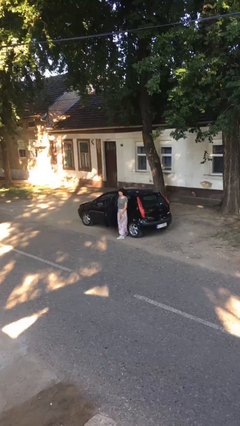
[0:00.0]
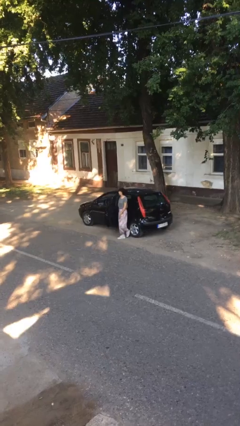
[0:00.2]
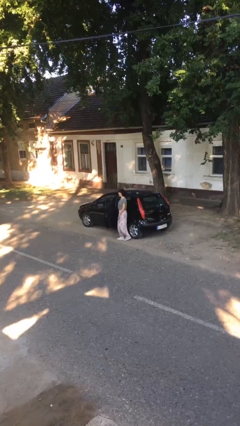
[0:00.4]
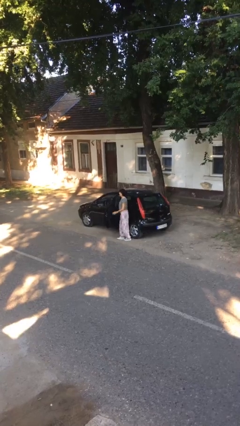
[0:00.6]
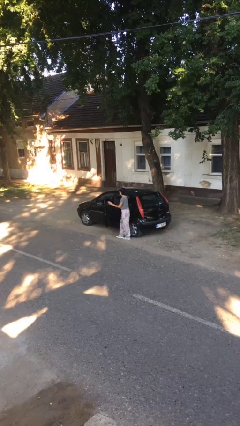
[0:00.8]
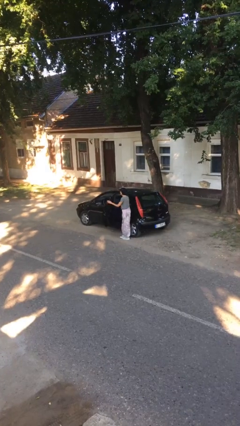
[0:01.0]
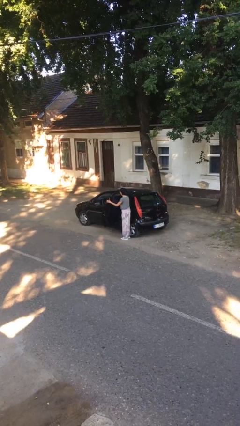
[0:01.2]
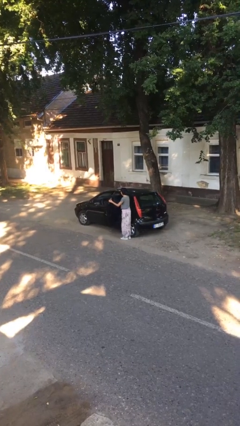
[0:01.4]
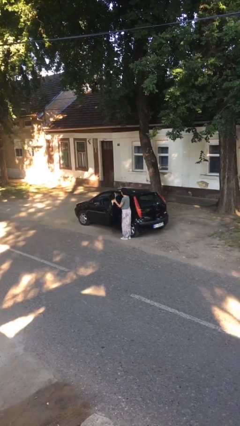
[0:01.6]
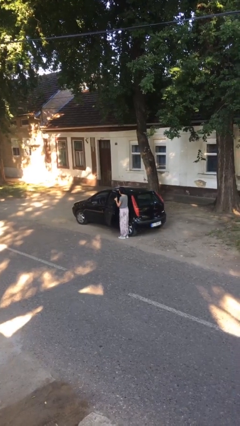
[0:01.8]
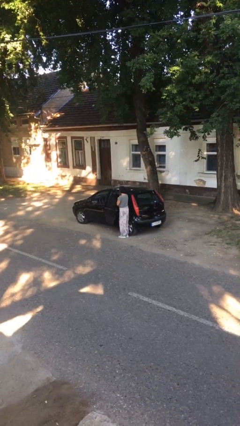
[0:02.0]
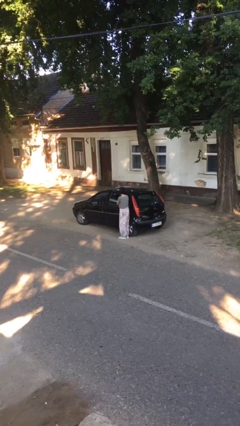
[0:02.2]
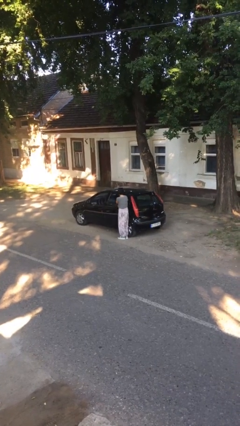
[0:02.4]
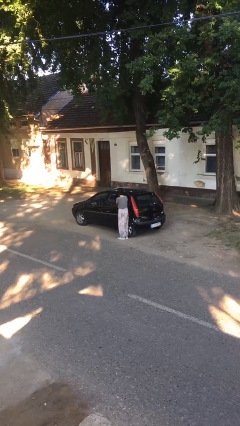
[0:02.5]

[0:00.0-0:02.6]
person closes car door

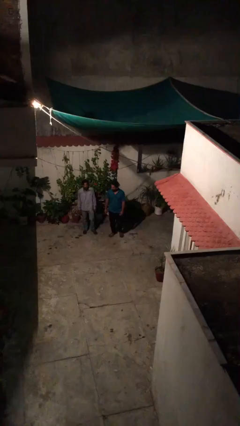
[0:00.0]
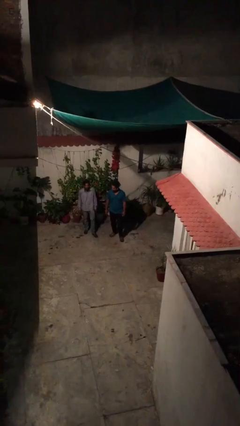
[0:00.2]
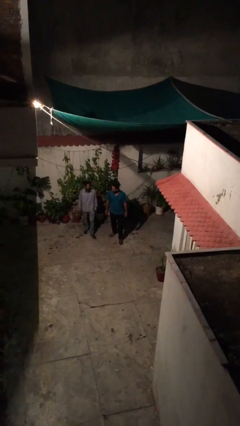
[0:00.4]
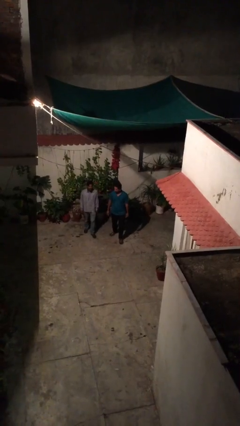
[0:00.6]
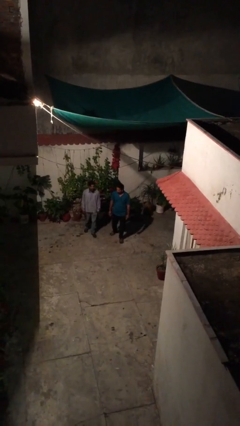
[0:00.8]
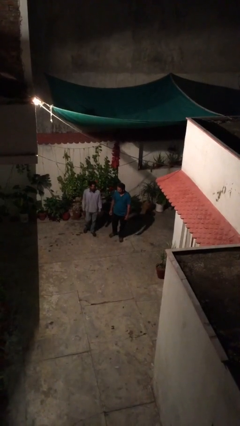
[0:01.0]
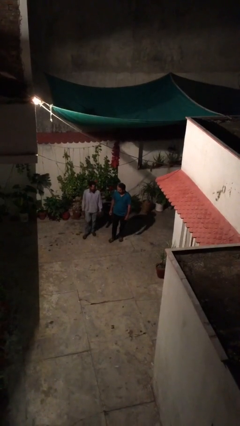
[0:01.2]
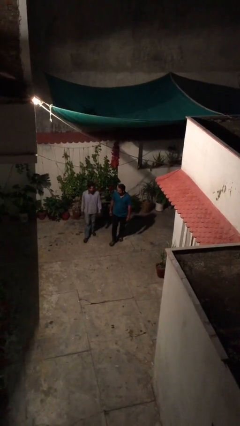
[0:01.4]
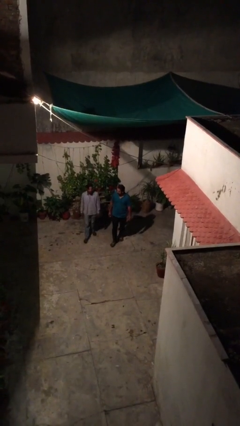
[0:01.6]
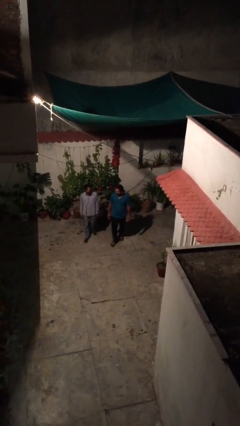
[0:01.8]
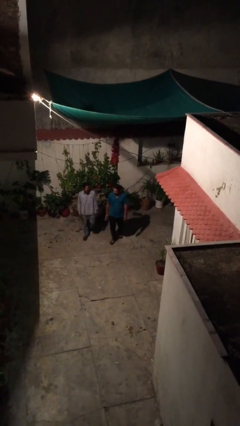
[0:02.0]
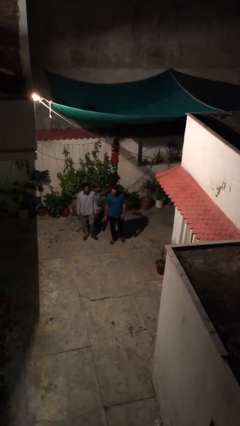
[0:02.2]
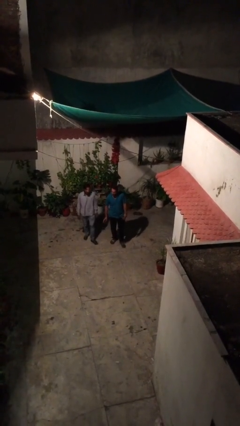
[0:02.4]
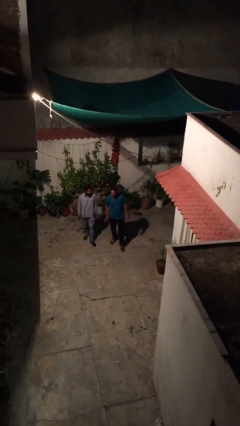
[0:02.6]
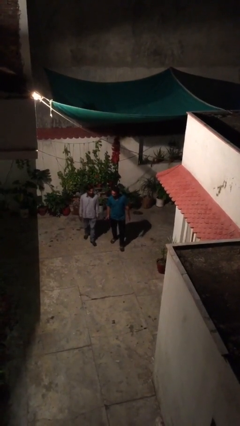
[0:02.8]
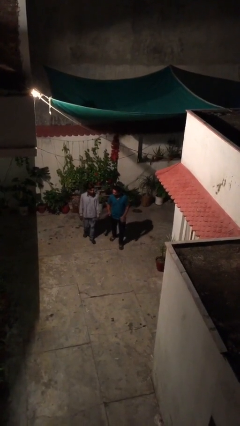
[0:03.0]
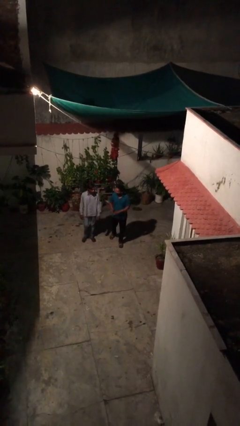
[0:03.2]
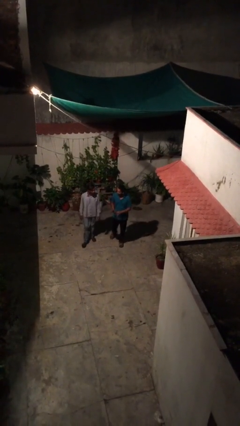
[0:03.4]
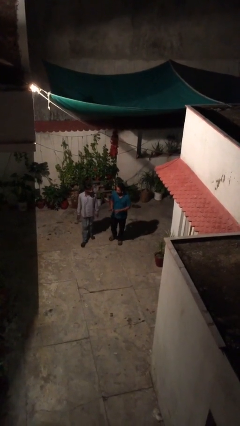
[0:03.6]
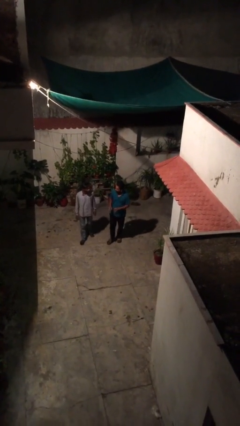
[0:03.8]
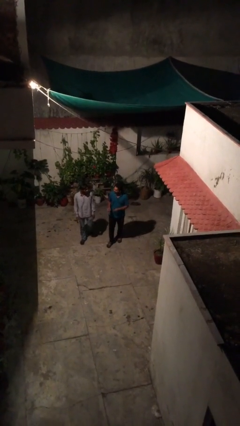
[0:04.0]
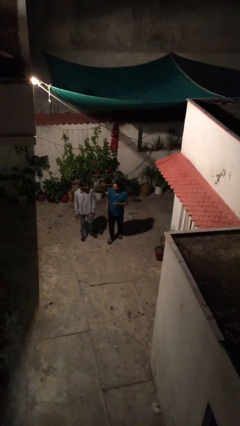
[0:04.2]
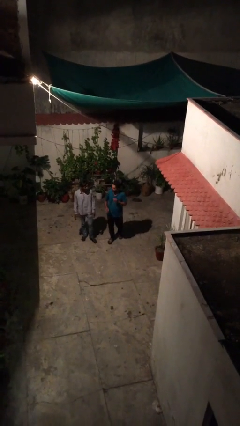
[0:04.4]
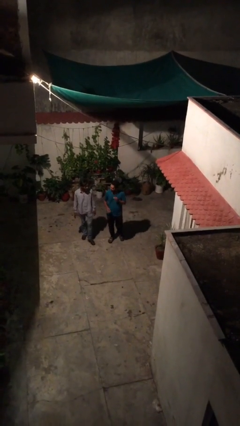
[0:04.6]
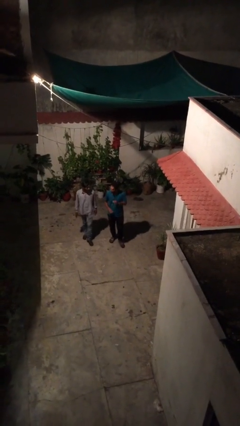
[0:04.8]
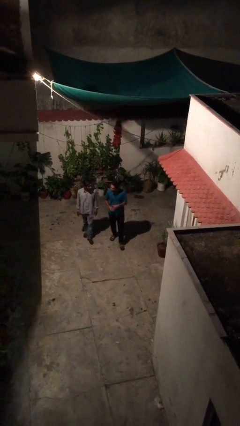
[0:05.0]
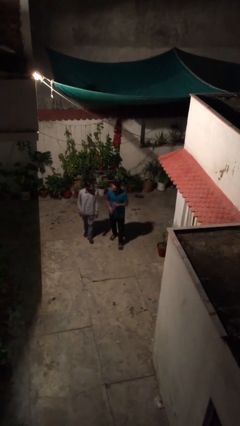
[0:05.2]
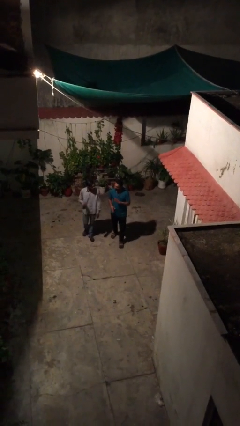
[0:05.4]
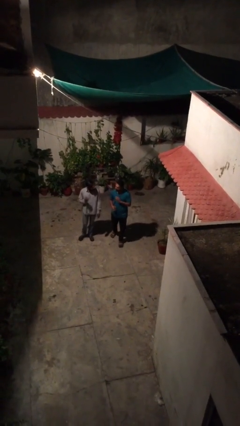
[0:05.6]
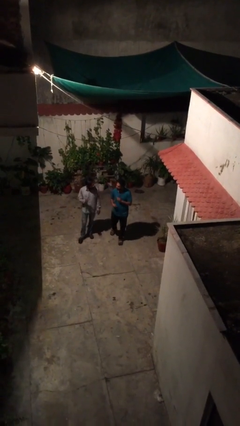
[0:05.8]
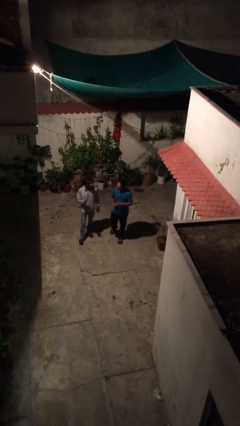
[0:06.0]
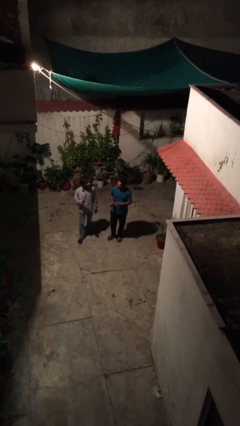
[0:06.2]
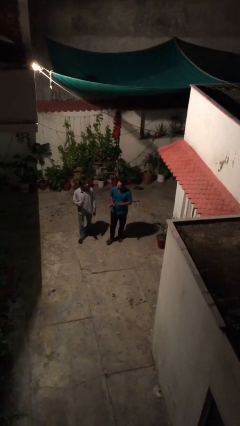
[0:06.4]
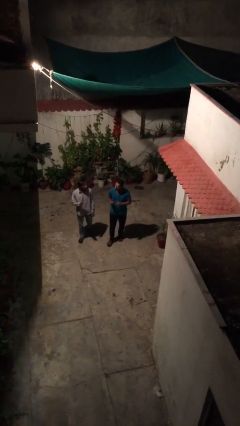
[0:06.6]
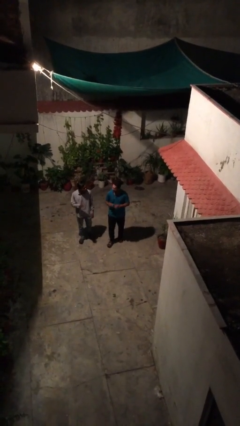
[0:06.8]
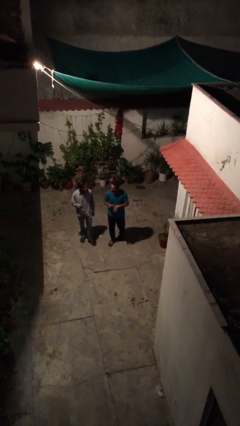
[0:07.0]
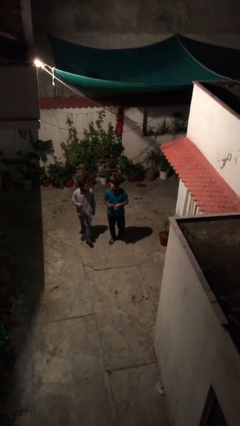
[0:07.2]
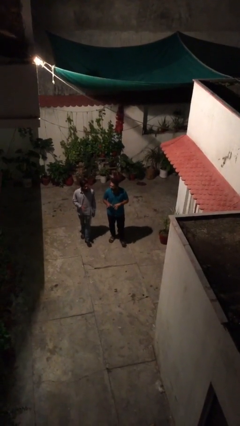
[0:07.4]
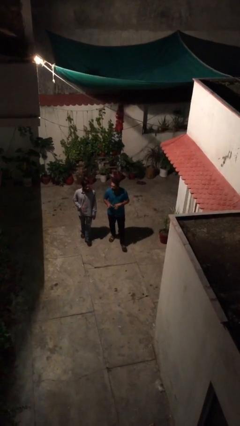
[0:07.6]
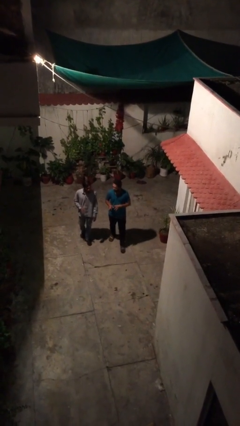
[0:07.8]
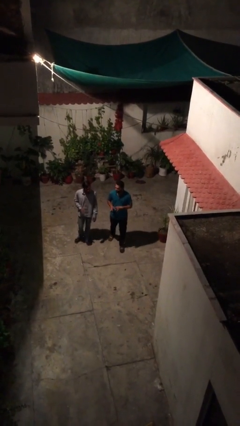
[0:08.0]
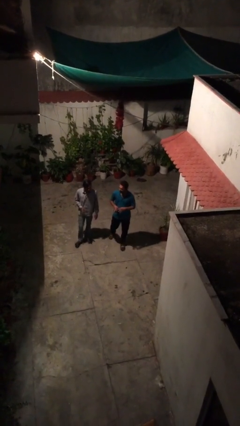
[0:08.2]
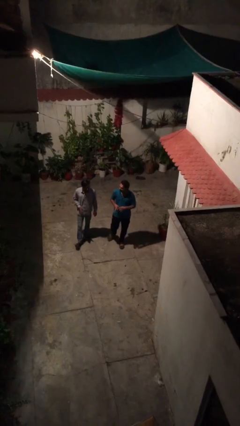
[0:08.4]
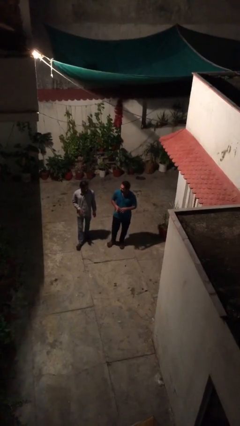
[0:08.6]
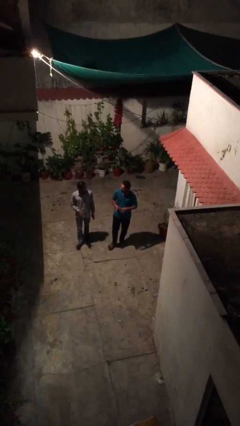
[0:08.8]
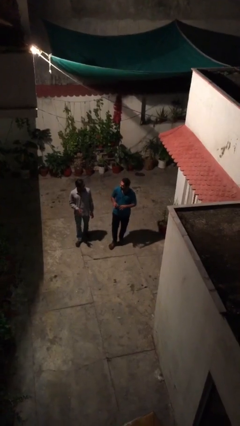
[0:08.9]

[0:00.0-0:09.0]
person talks to person

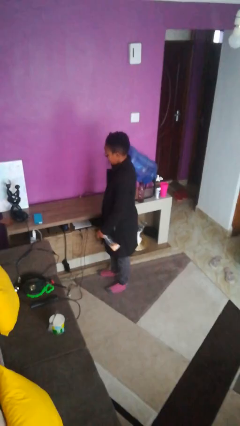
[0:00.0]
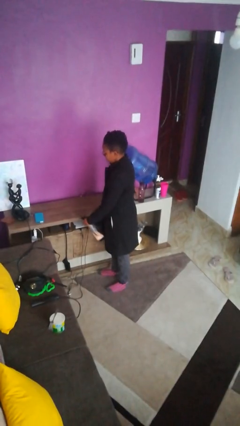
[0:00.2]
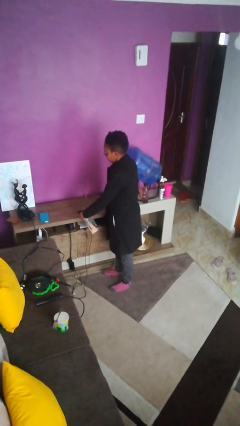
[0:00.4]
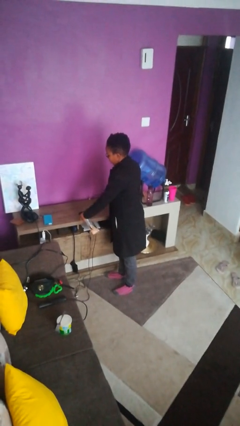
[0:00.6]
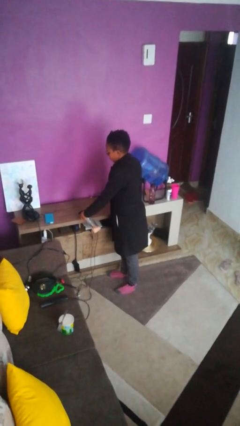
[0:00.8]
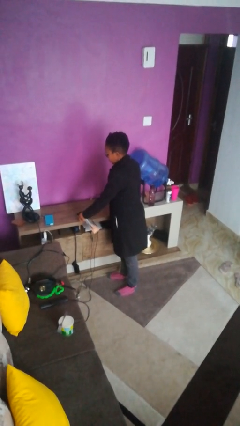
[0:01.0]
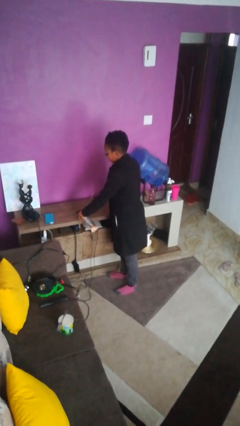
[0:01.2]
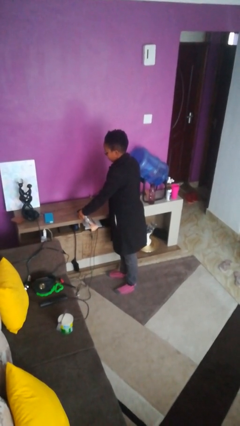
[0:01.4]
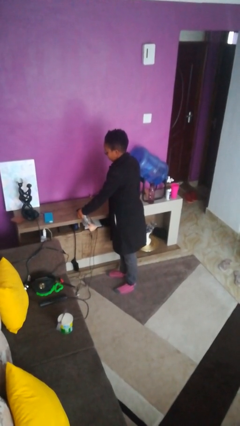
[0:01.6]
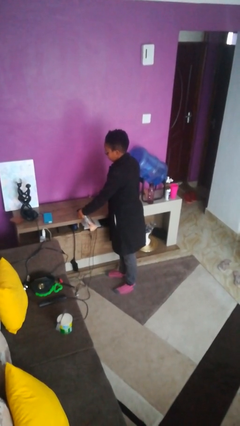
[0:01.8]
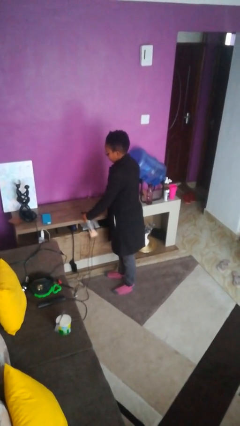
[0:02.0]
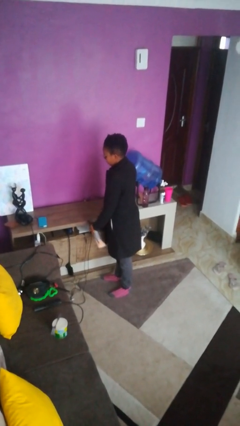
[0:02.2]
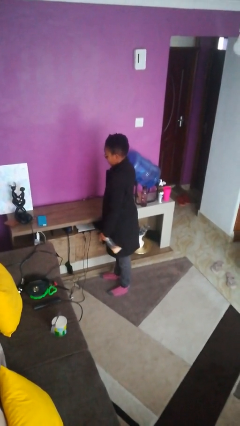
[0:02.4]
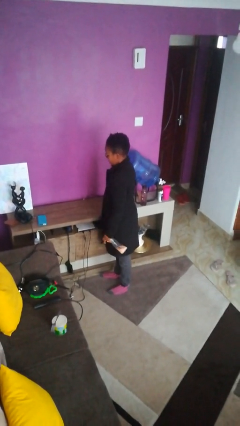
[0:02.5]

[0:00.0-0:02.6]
person sprays from bottle

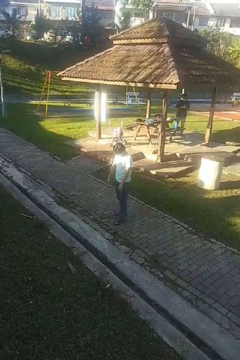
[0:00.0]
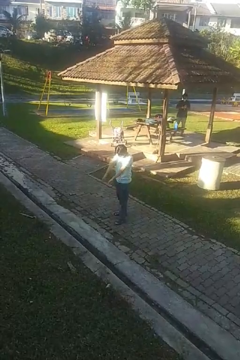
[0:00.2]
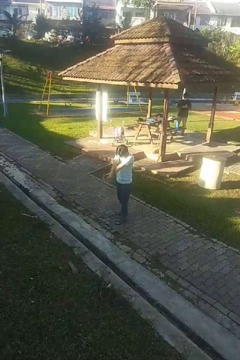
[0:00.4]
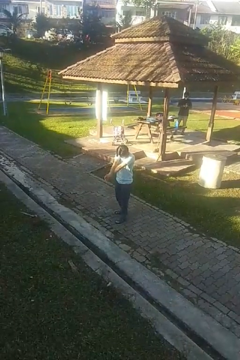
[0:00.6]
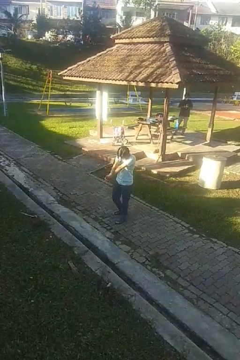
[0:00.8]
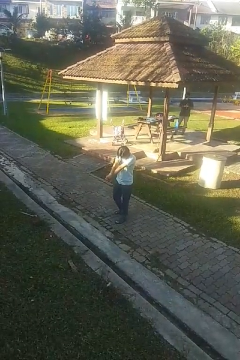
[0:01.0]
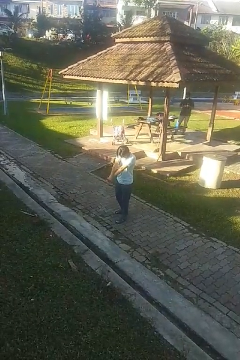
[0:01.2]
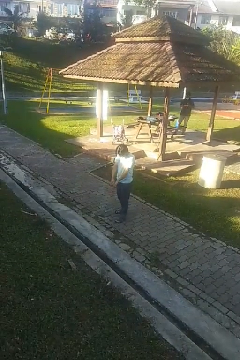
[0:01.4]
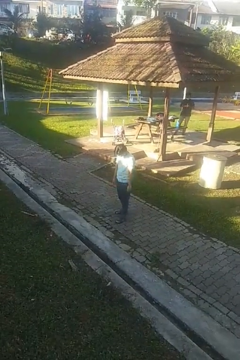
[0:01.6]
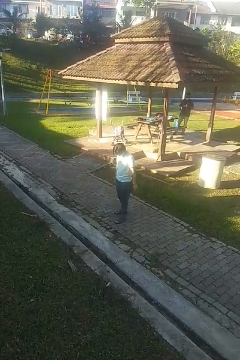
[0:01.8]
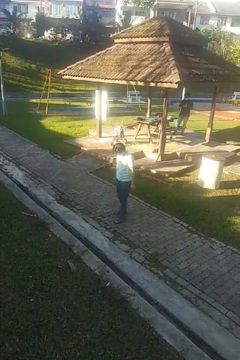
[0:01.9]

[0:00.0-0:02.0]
person crosses arms

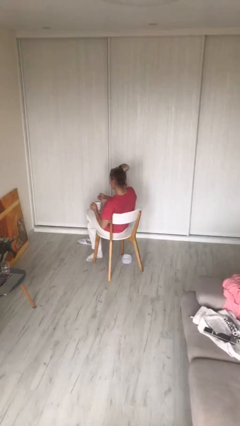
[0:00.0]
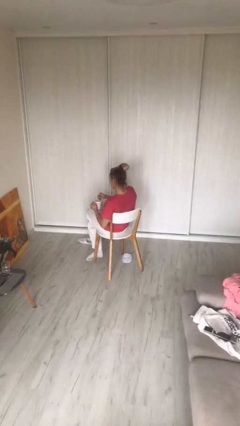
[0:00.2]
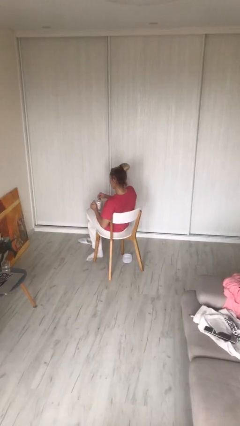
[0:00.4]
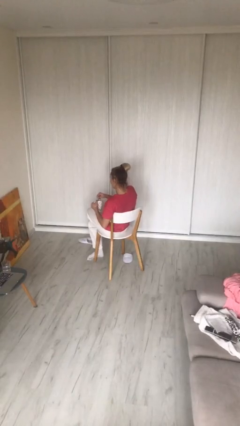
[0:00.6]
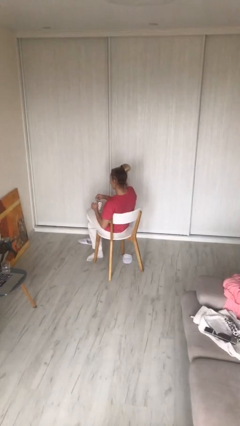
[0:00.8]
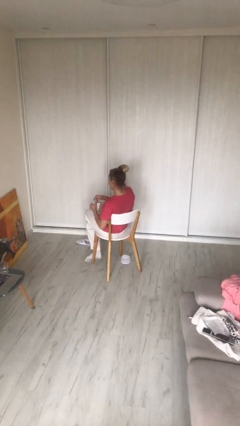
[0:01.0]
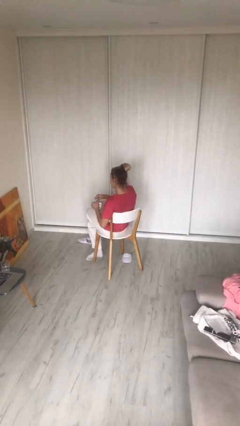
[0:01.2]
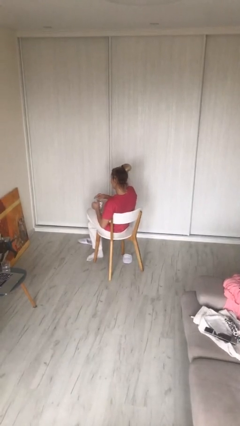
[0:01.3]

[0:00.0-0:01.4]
person stirs mug

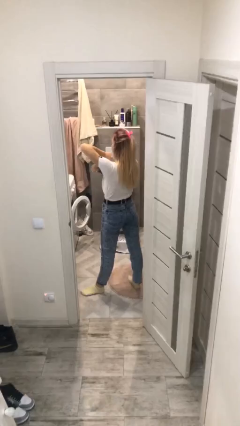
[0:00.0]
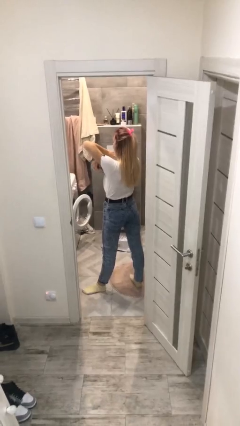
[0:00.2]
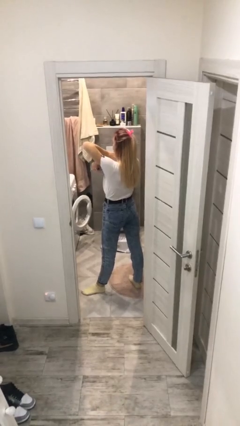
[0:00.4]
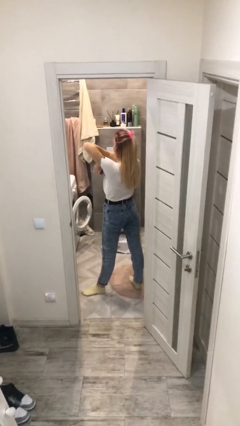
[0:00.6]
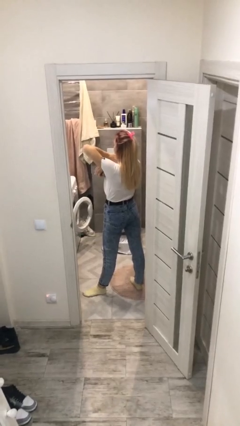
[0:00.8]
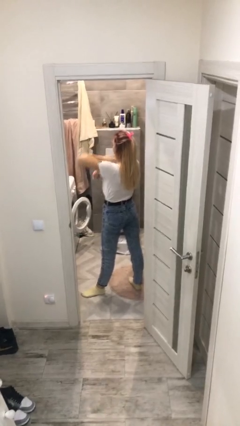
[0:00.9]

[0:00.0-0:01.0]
person applies deodorant
